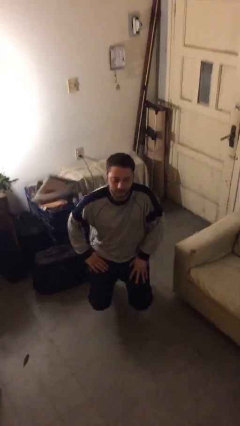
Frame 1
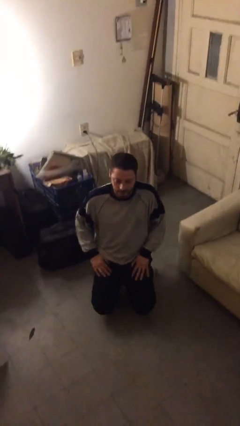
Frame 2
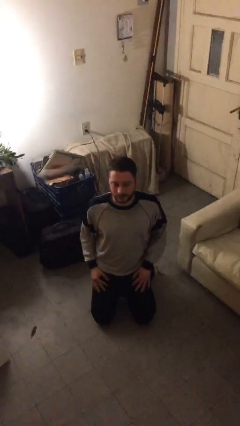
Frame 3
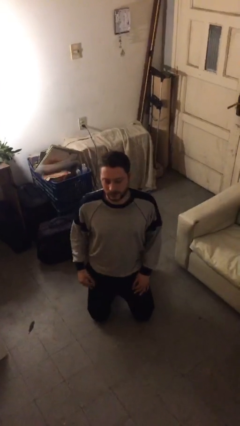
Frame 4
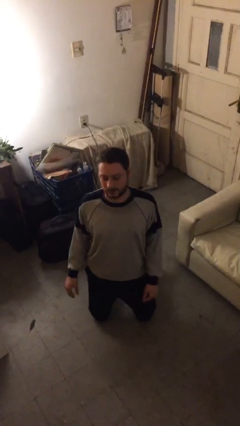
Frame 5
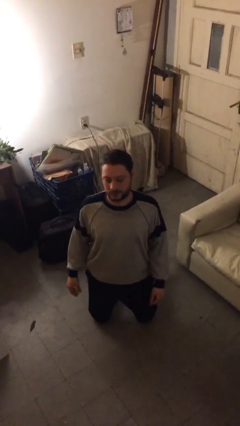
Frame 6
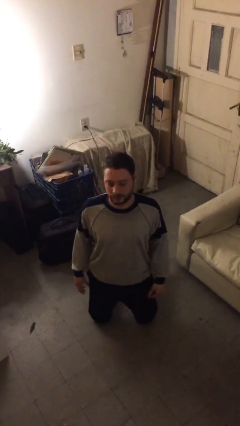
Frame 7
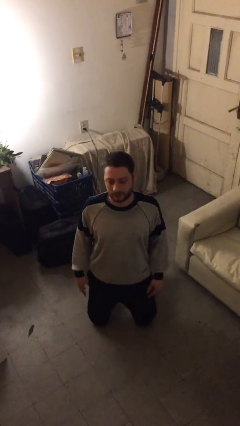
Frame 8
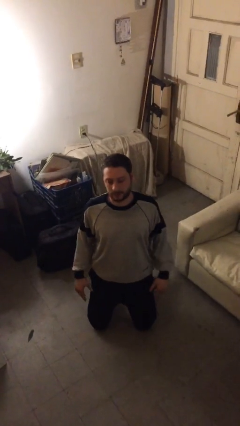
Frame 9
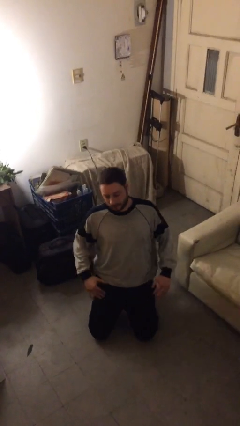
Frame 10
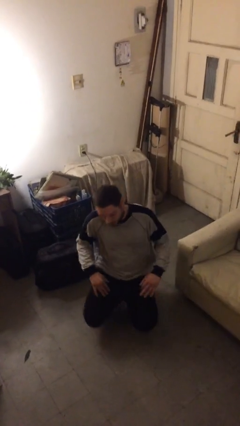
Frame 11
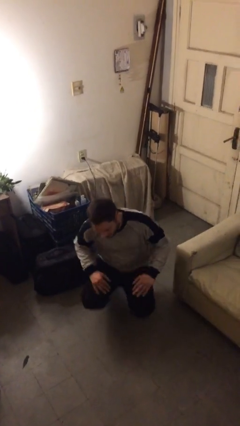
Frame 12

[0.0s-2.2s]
person kneels

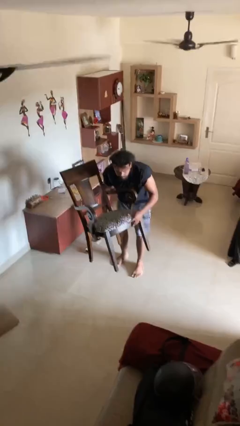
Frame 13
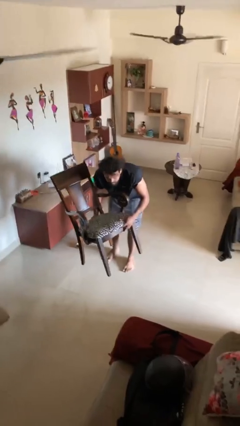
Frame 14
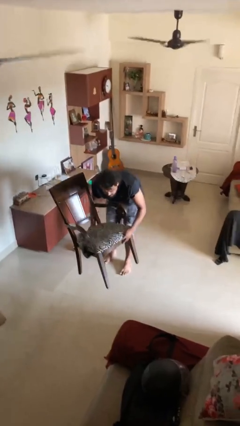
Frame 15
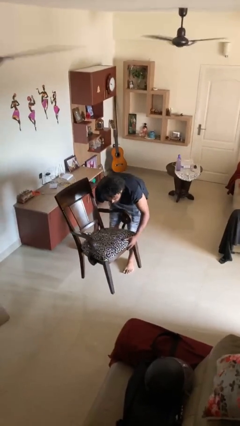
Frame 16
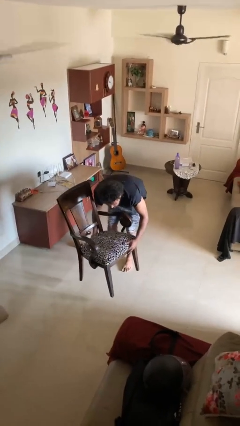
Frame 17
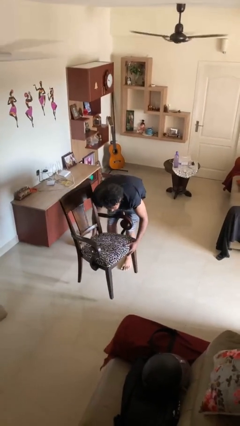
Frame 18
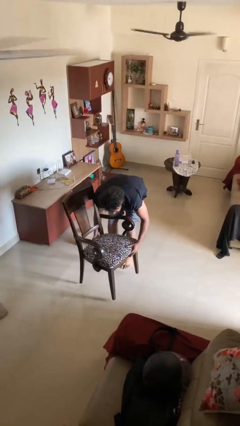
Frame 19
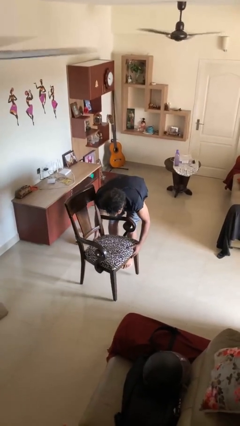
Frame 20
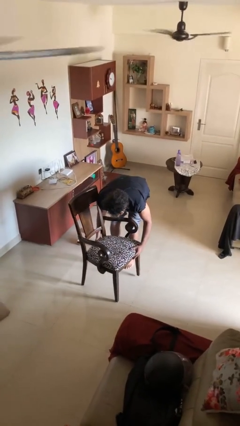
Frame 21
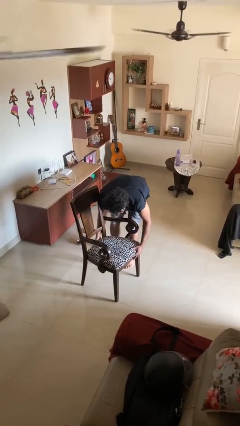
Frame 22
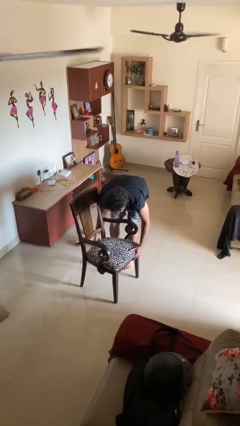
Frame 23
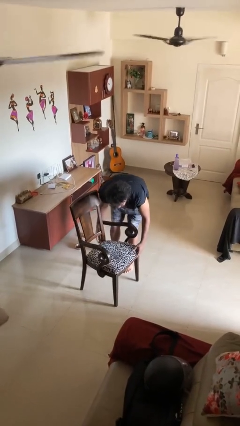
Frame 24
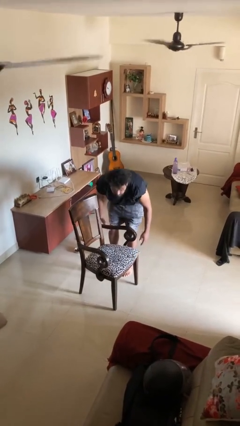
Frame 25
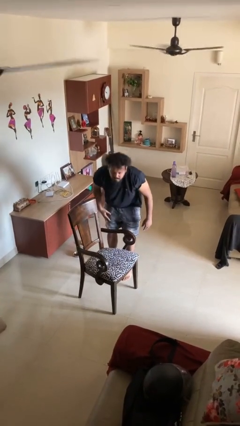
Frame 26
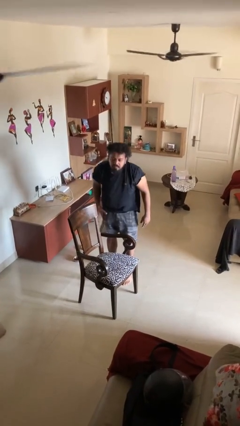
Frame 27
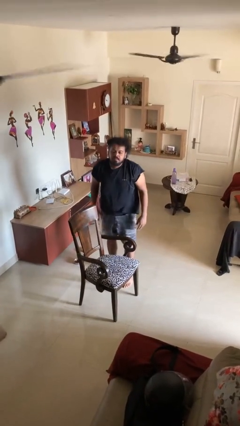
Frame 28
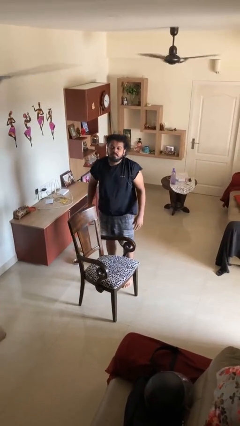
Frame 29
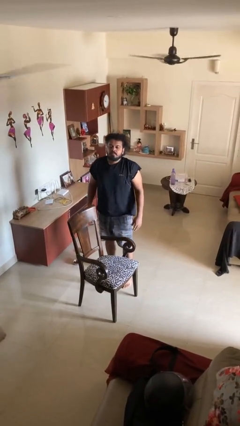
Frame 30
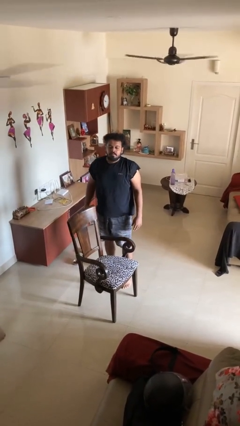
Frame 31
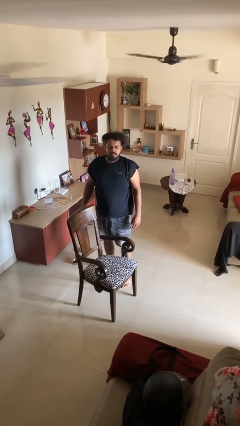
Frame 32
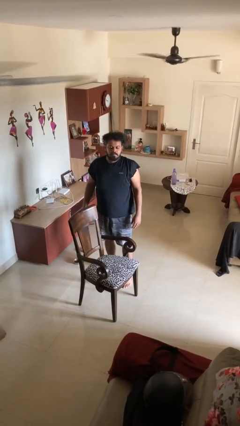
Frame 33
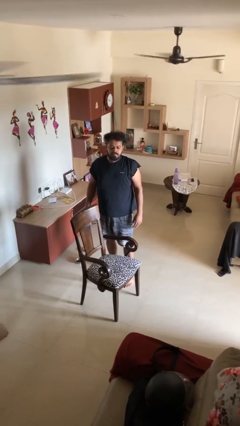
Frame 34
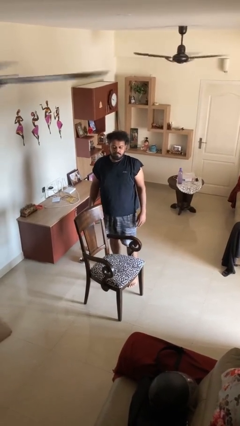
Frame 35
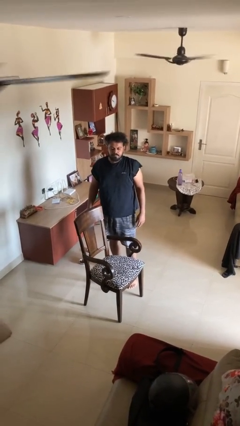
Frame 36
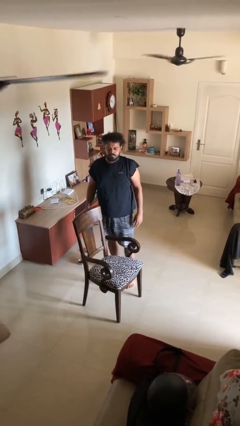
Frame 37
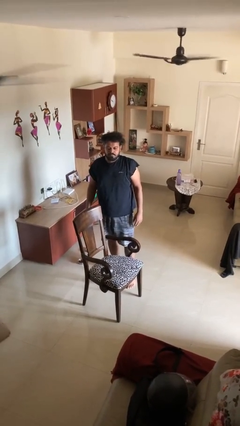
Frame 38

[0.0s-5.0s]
person puts down object on floor

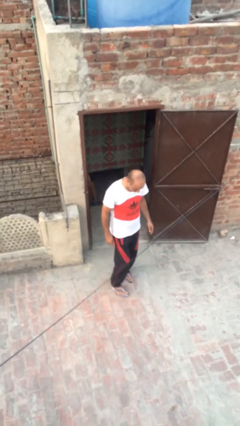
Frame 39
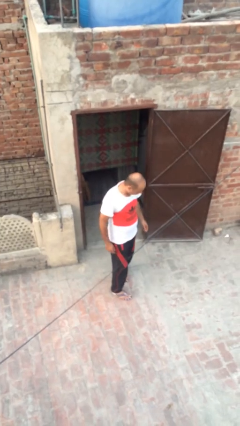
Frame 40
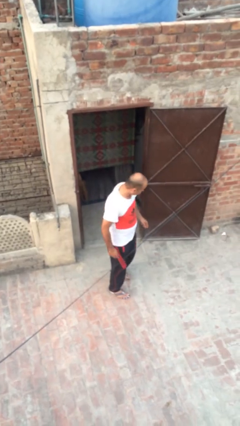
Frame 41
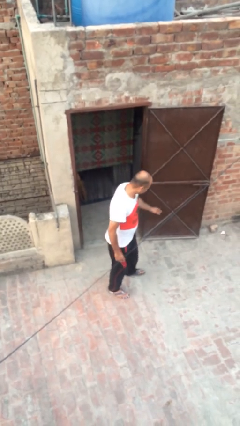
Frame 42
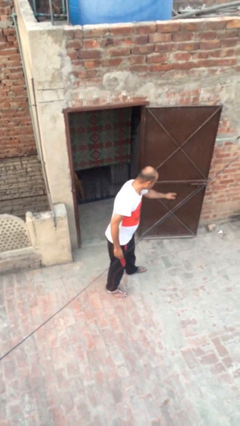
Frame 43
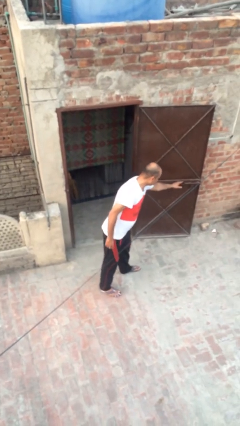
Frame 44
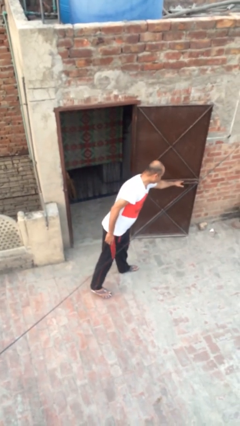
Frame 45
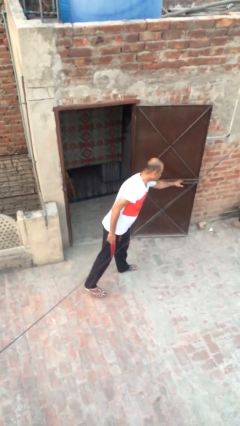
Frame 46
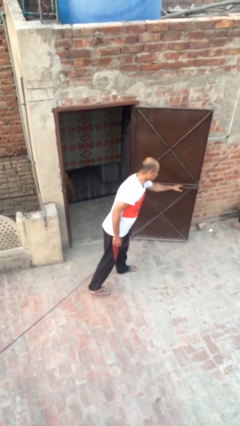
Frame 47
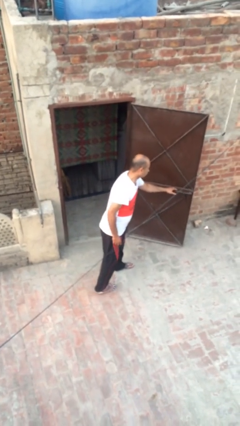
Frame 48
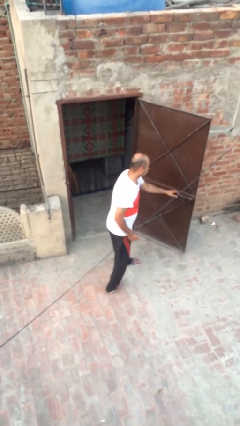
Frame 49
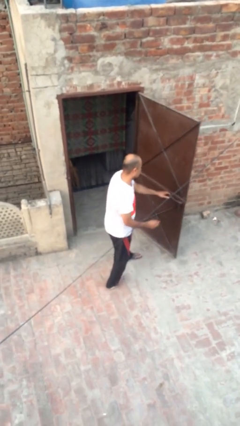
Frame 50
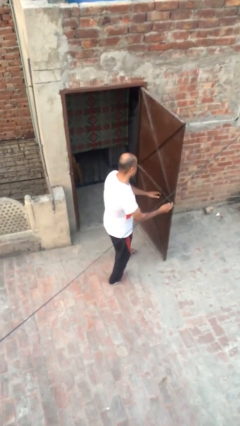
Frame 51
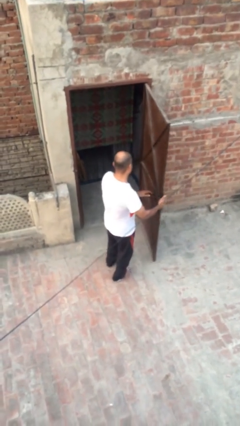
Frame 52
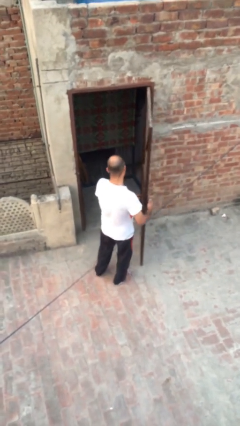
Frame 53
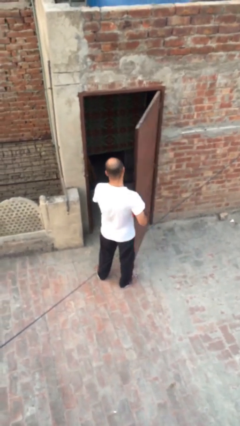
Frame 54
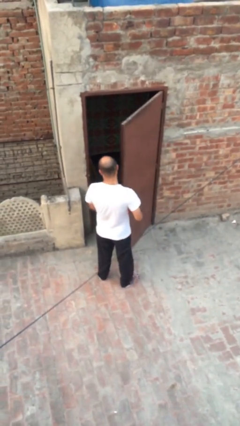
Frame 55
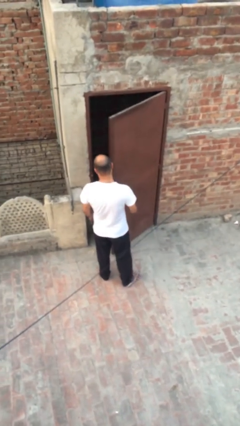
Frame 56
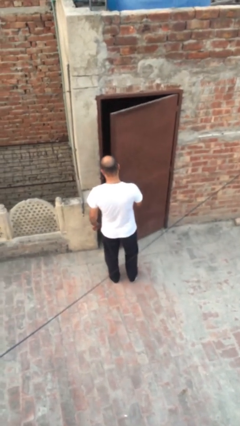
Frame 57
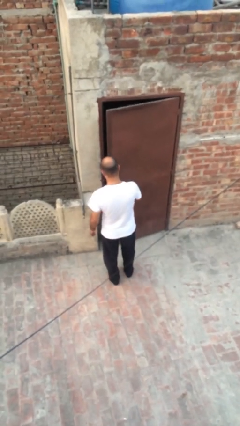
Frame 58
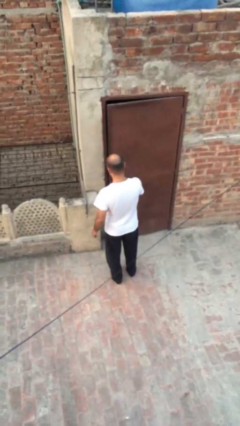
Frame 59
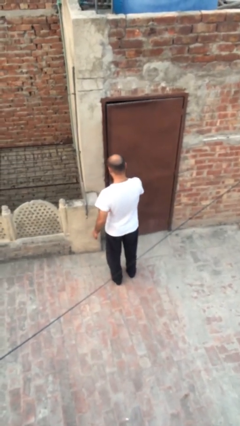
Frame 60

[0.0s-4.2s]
person closes facility door

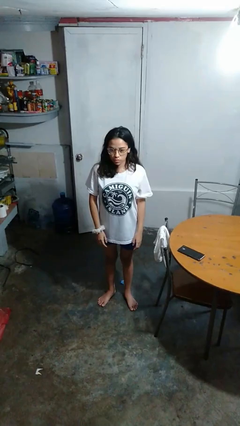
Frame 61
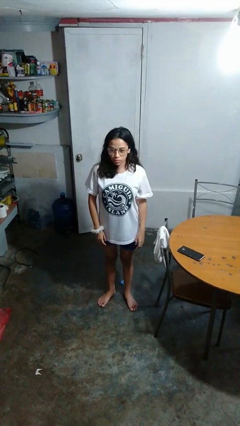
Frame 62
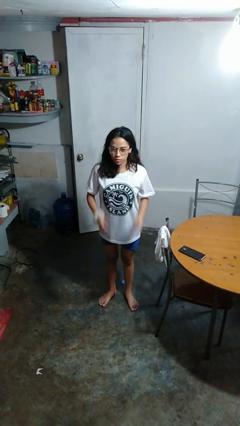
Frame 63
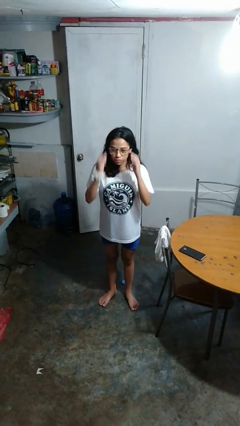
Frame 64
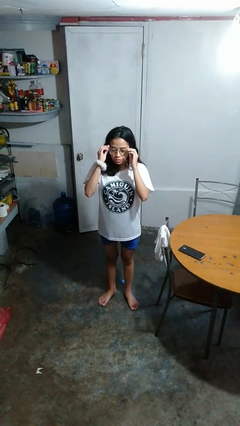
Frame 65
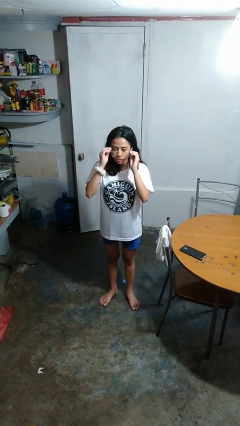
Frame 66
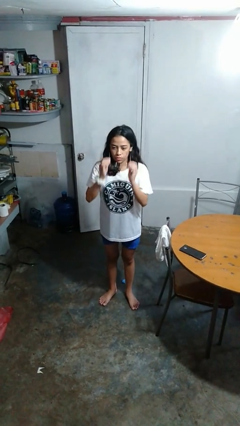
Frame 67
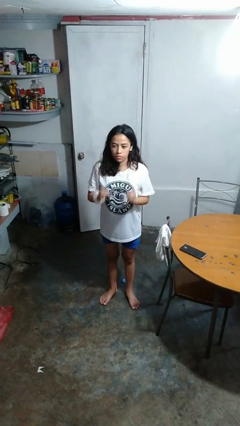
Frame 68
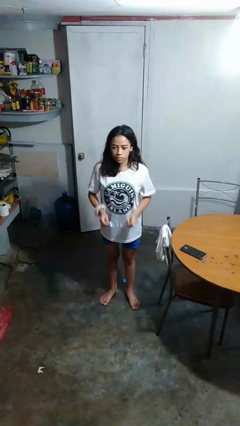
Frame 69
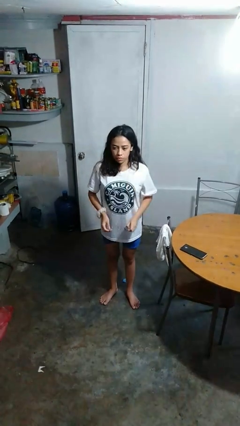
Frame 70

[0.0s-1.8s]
person takes off glasses

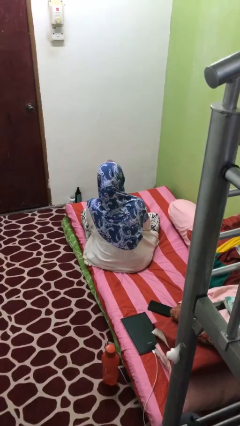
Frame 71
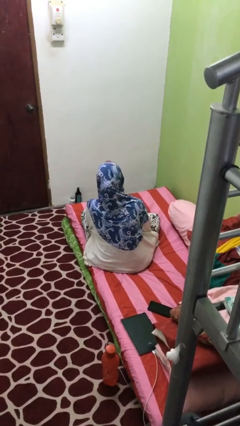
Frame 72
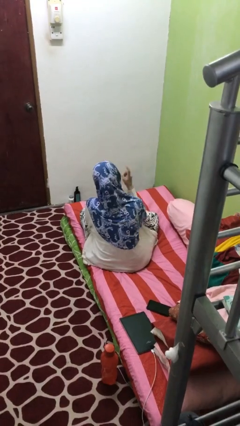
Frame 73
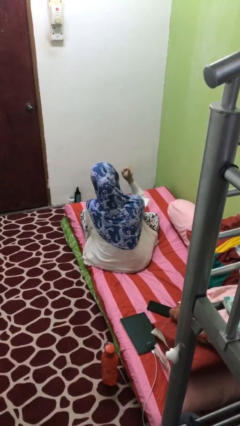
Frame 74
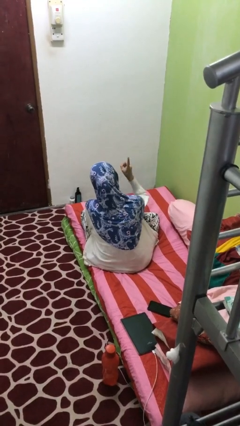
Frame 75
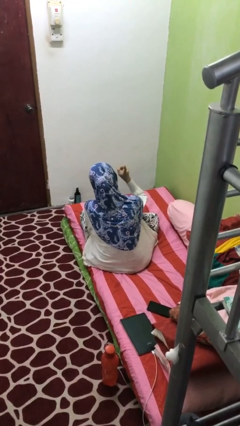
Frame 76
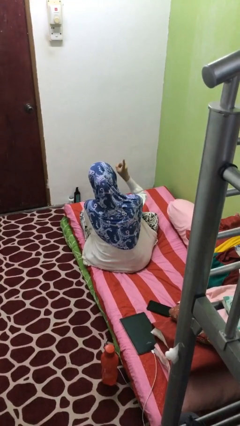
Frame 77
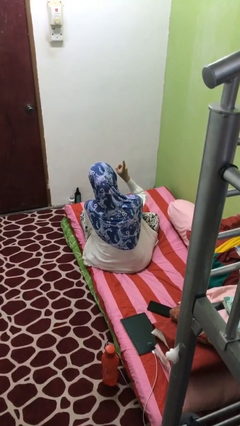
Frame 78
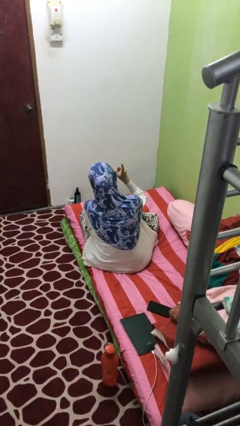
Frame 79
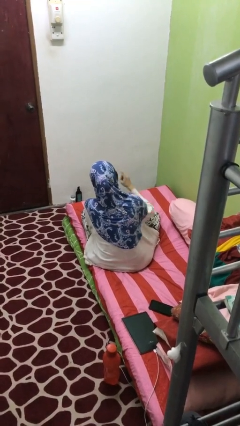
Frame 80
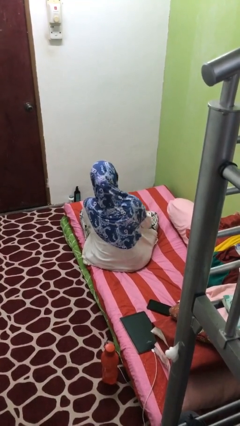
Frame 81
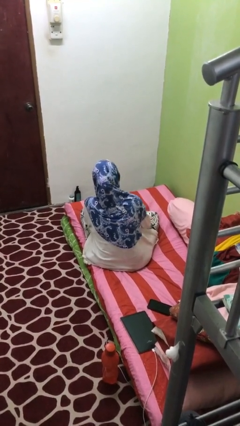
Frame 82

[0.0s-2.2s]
person gestures number one

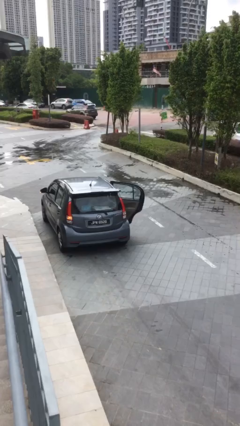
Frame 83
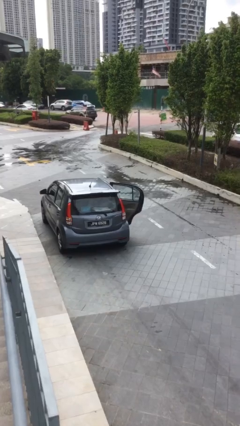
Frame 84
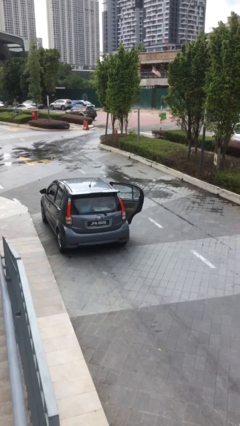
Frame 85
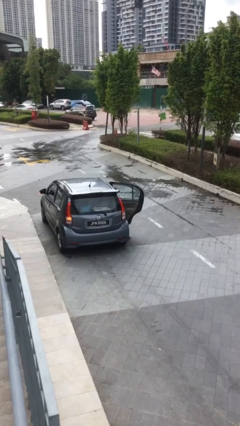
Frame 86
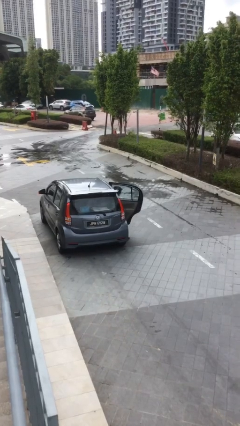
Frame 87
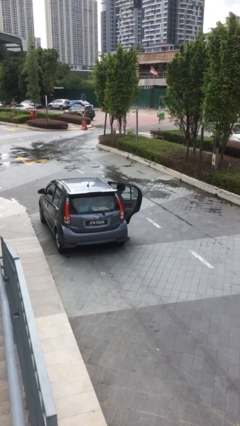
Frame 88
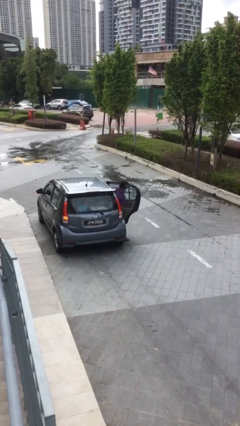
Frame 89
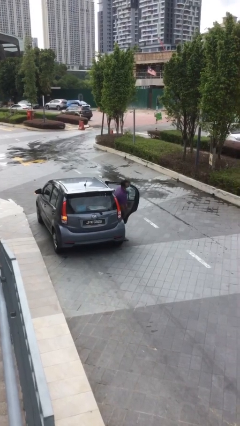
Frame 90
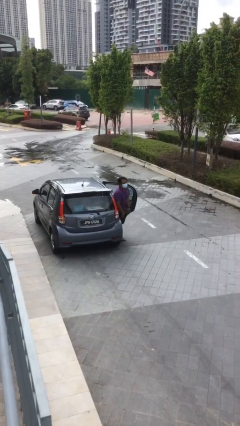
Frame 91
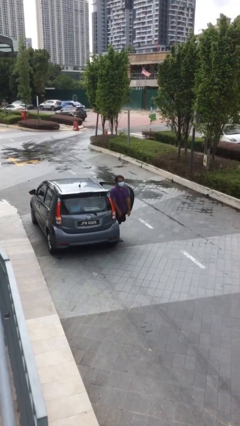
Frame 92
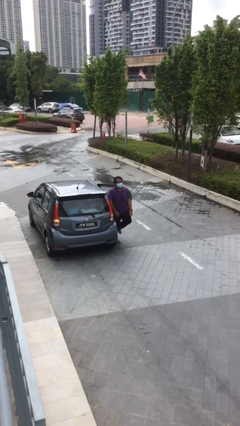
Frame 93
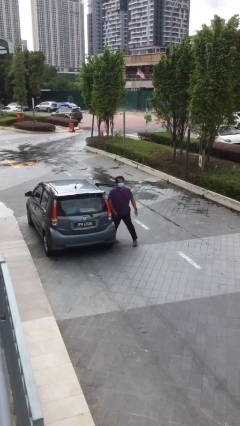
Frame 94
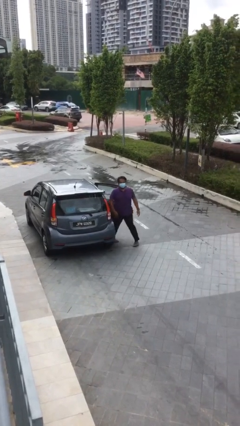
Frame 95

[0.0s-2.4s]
person exits car
